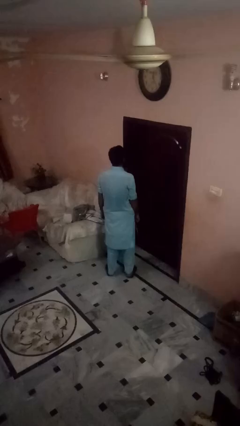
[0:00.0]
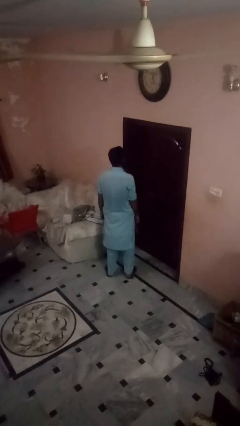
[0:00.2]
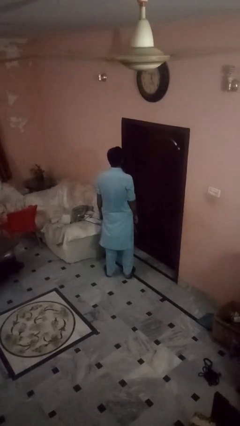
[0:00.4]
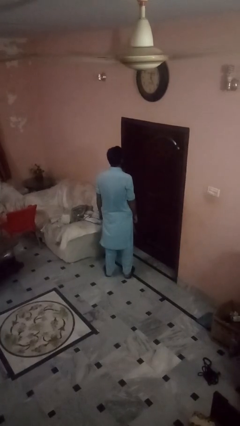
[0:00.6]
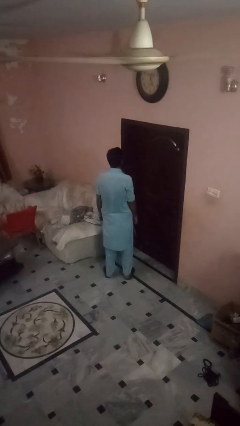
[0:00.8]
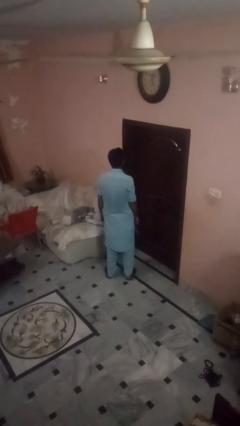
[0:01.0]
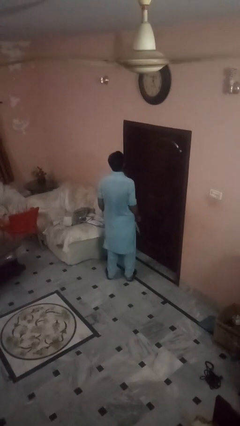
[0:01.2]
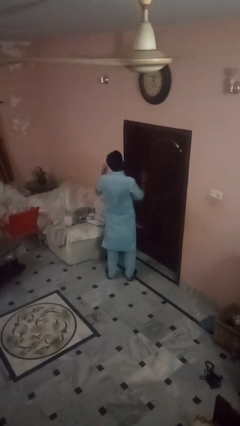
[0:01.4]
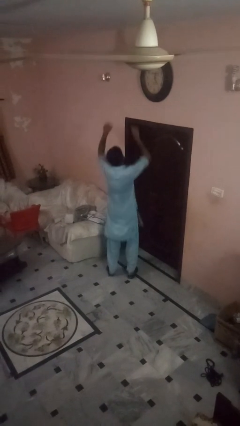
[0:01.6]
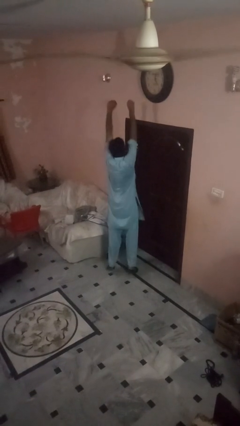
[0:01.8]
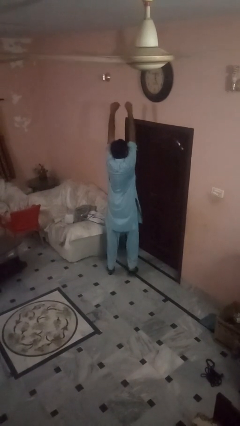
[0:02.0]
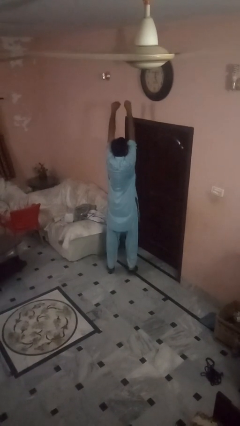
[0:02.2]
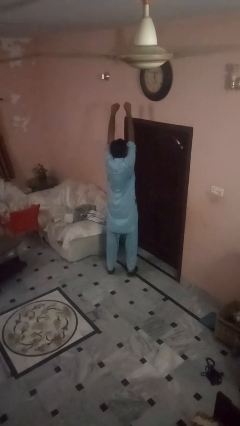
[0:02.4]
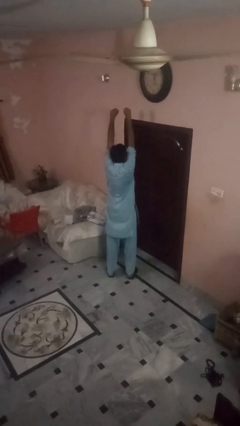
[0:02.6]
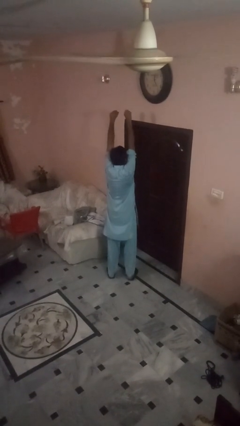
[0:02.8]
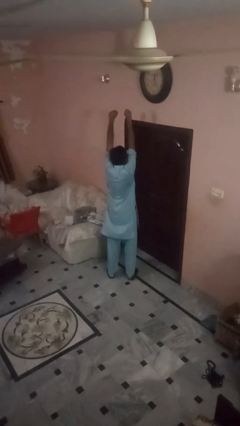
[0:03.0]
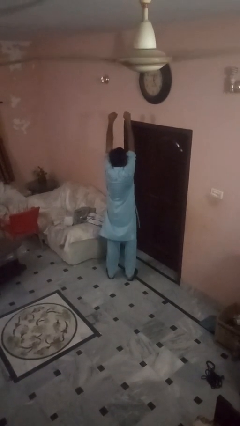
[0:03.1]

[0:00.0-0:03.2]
person handstand

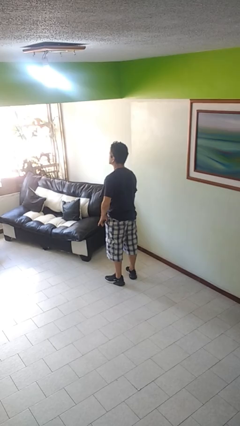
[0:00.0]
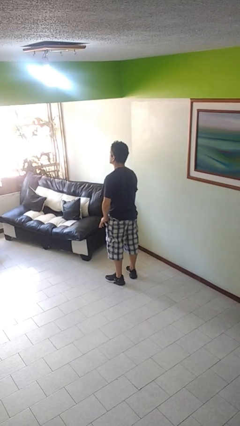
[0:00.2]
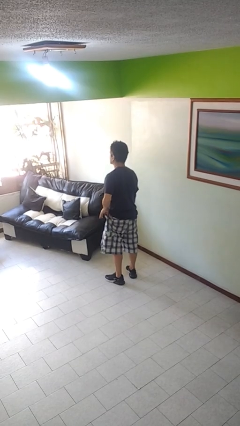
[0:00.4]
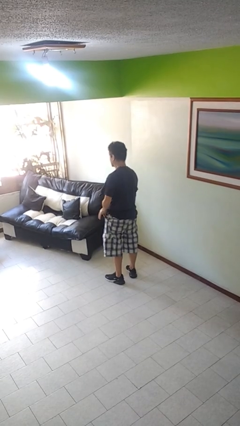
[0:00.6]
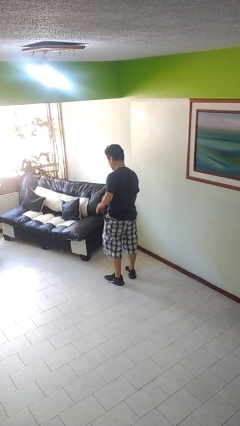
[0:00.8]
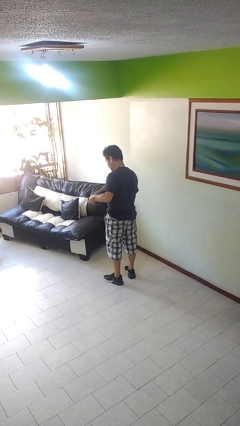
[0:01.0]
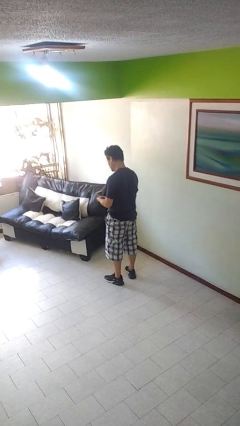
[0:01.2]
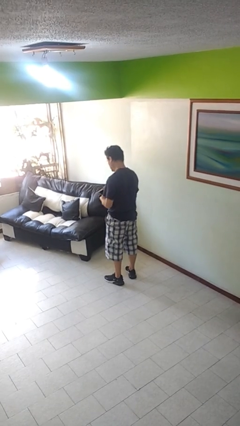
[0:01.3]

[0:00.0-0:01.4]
person takes phone from pocket

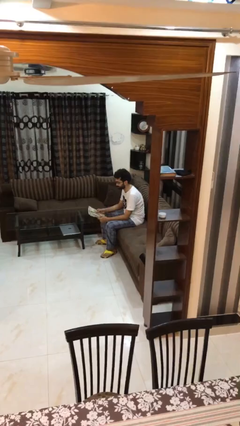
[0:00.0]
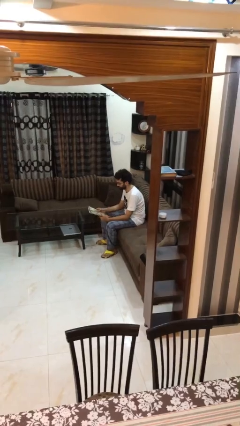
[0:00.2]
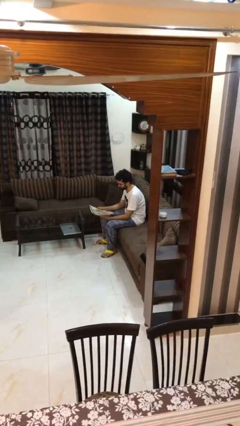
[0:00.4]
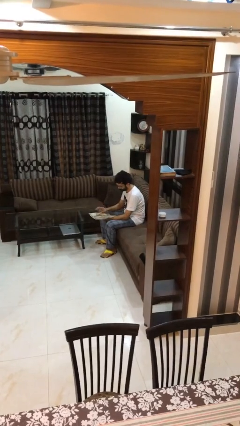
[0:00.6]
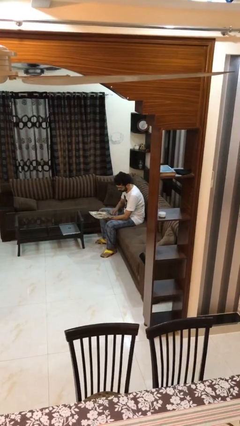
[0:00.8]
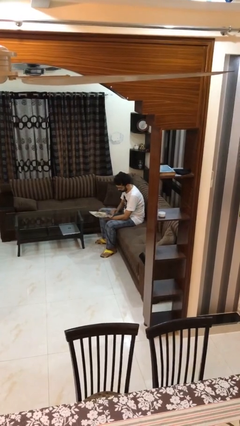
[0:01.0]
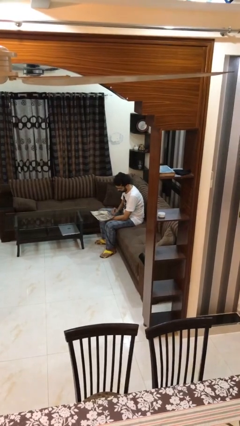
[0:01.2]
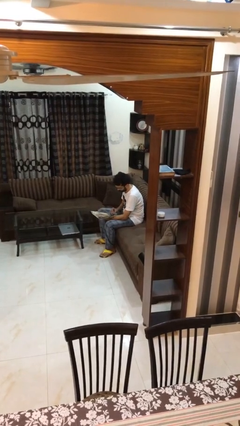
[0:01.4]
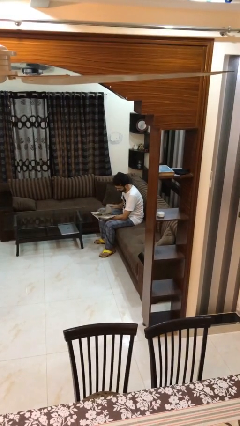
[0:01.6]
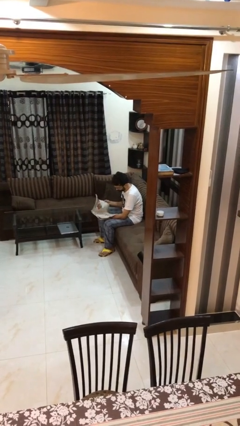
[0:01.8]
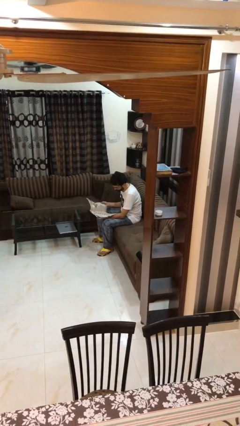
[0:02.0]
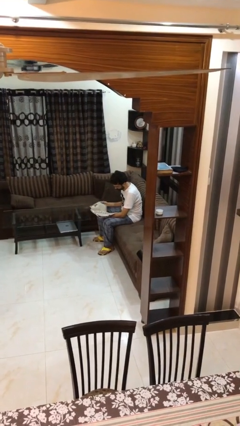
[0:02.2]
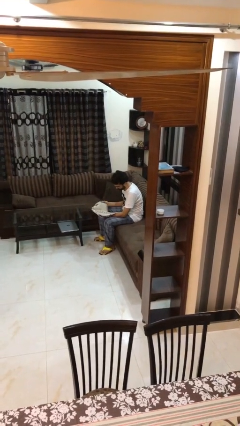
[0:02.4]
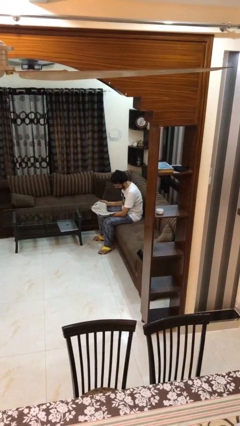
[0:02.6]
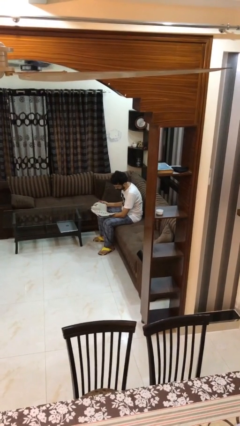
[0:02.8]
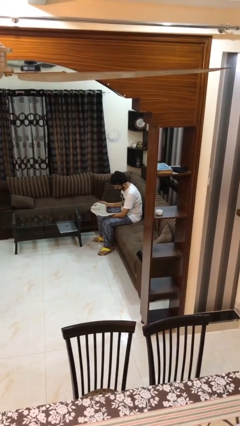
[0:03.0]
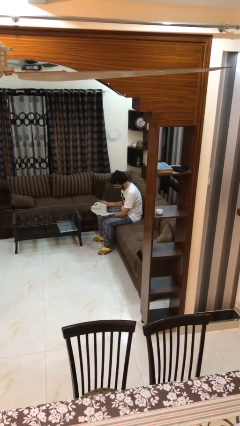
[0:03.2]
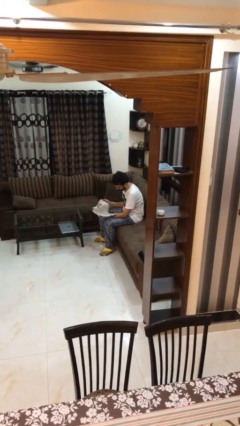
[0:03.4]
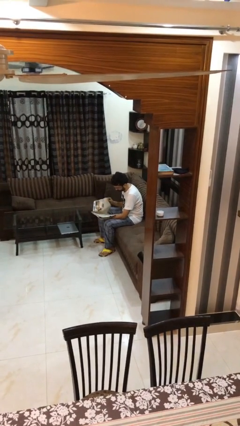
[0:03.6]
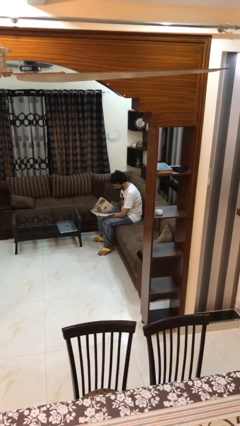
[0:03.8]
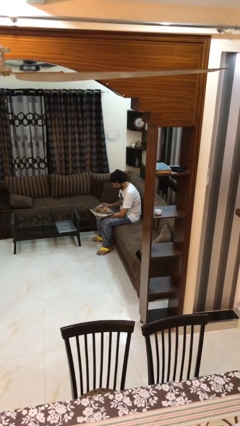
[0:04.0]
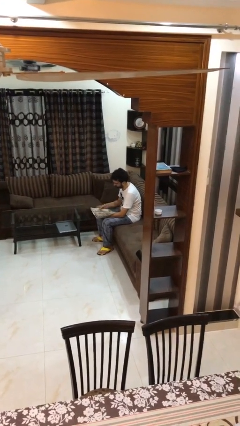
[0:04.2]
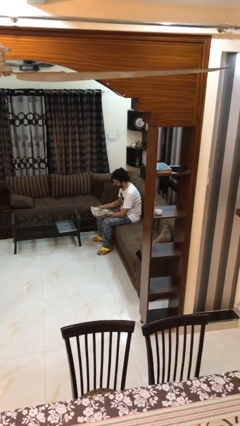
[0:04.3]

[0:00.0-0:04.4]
person reads document

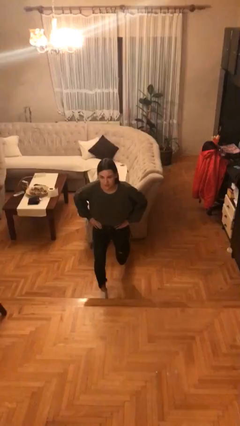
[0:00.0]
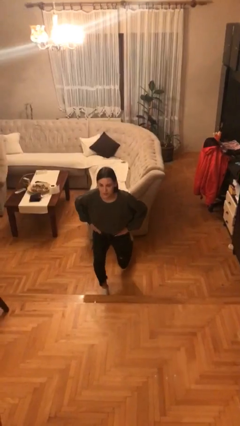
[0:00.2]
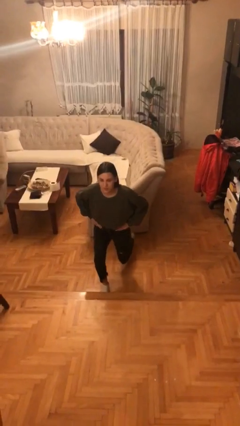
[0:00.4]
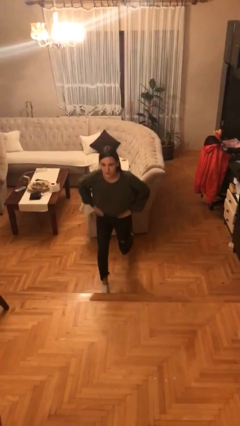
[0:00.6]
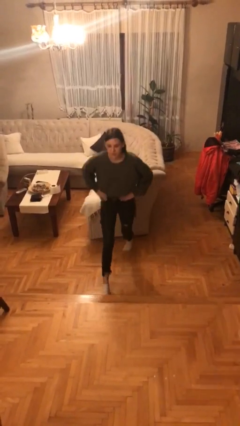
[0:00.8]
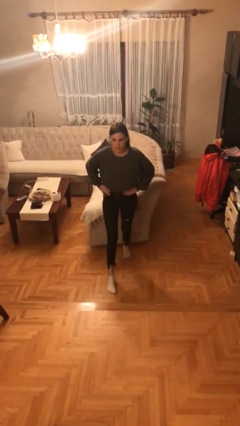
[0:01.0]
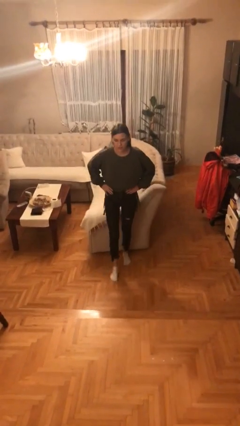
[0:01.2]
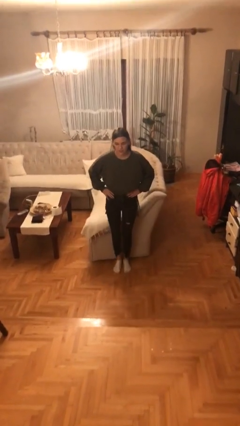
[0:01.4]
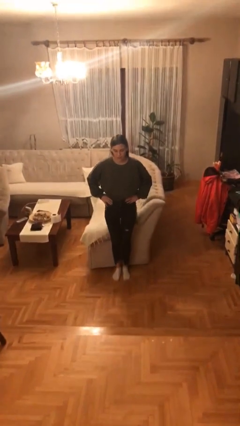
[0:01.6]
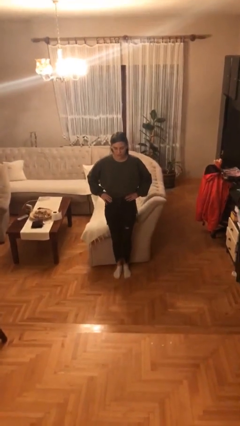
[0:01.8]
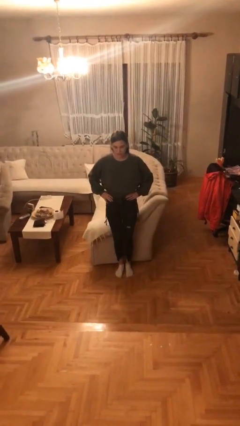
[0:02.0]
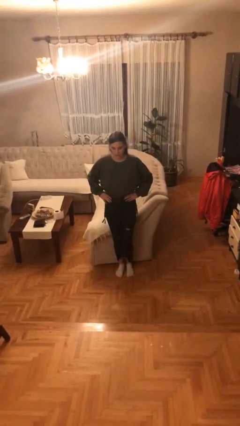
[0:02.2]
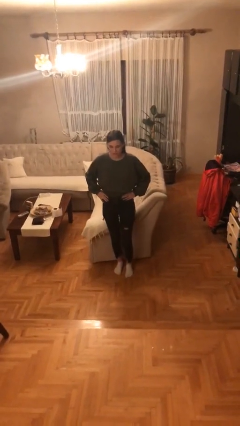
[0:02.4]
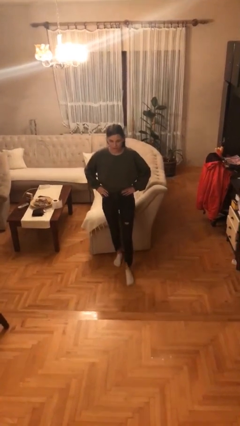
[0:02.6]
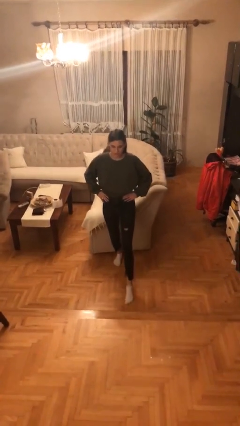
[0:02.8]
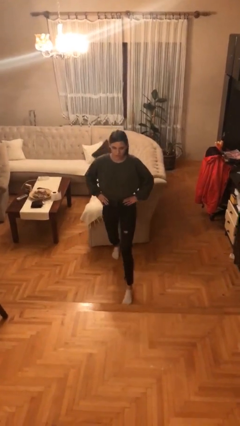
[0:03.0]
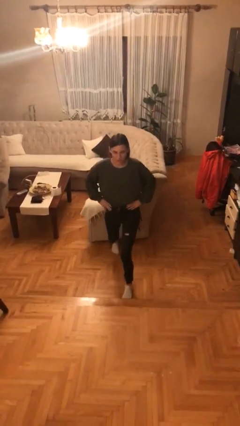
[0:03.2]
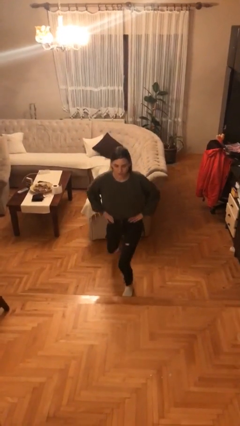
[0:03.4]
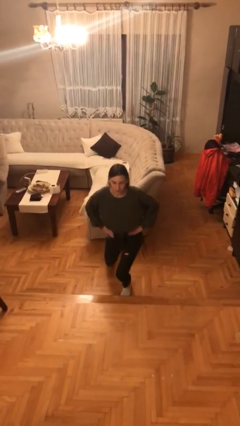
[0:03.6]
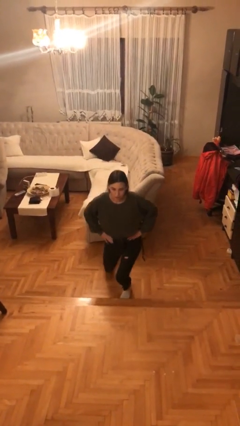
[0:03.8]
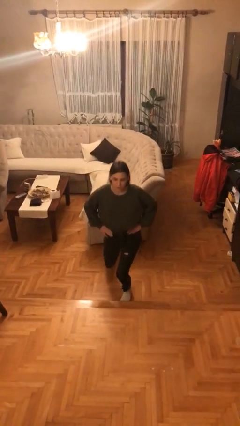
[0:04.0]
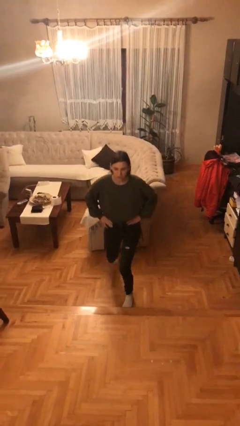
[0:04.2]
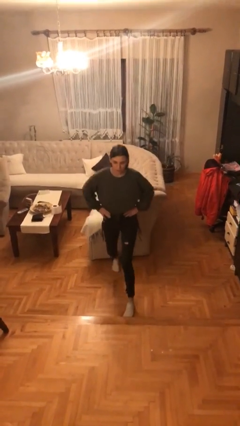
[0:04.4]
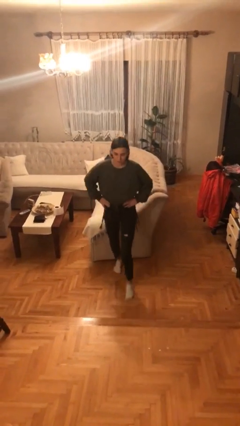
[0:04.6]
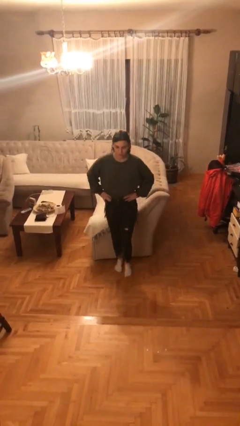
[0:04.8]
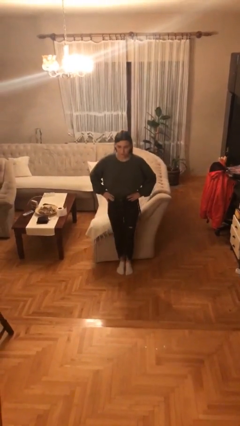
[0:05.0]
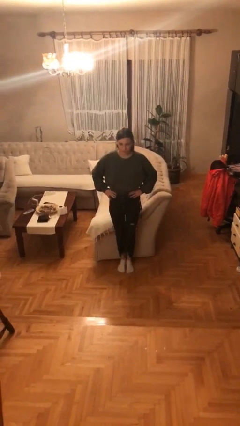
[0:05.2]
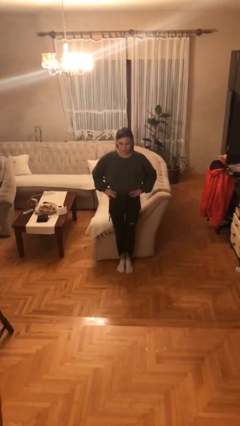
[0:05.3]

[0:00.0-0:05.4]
person exercises with lunges

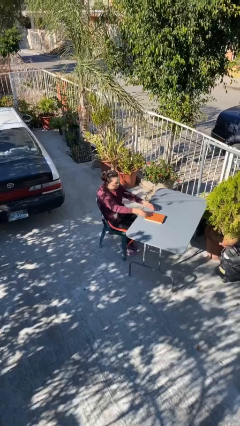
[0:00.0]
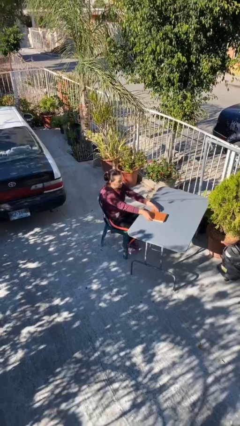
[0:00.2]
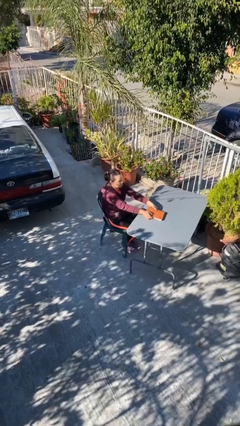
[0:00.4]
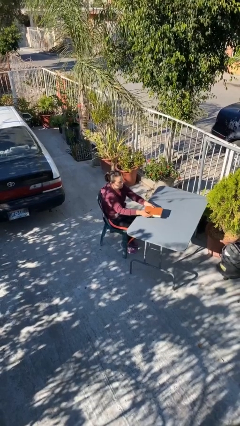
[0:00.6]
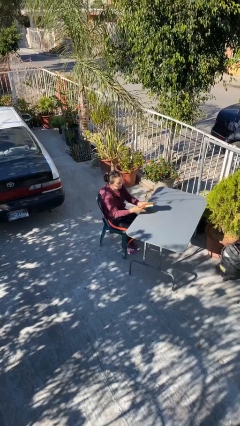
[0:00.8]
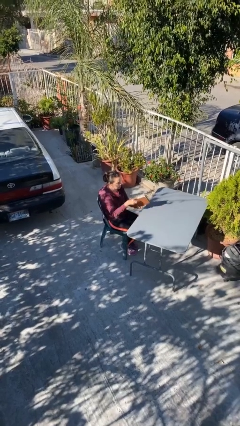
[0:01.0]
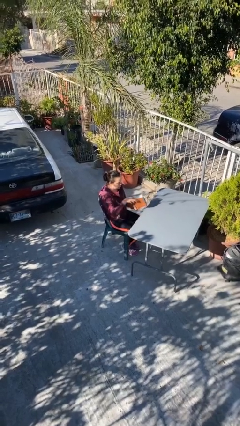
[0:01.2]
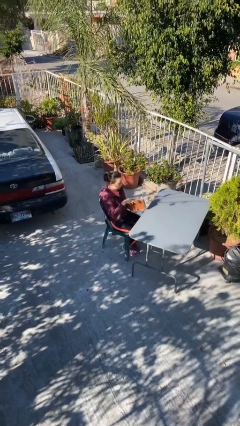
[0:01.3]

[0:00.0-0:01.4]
person picks up object from table

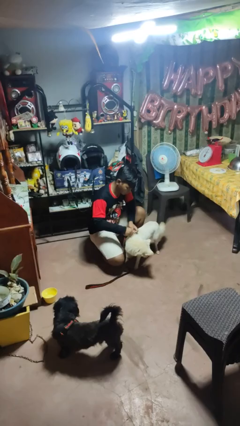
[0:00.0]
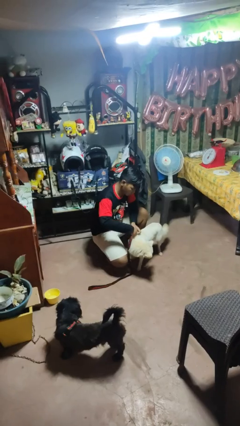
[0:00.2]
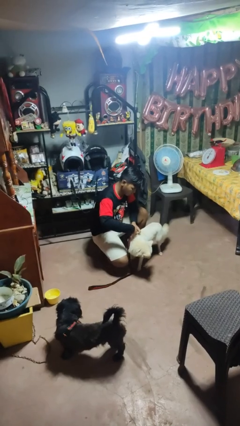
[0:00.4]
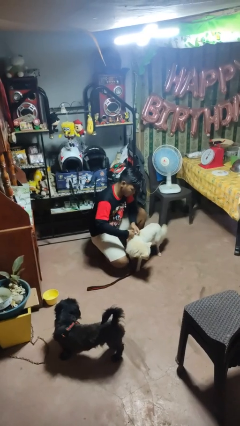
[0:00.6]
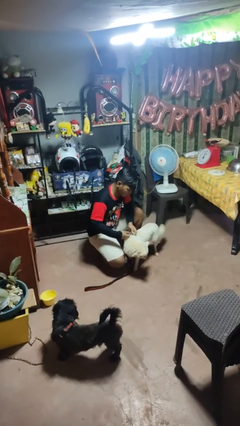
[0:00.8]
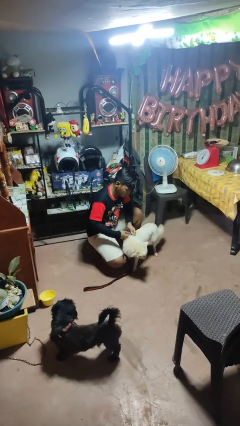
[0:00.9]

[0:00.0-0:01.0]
person attaches leash to dog

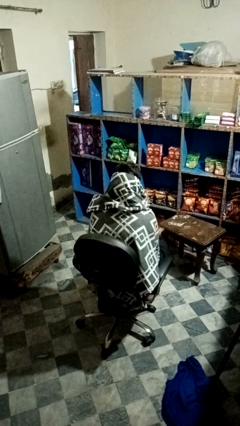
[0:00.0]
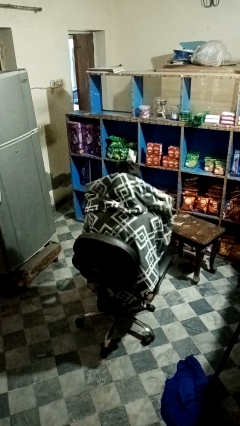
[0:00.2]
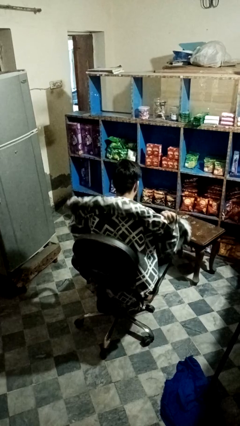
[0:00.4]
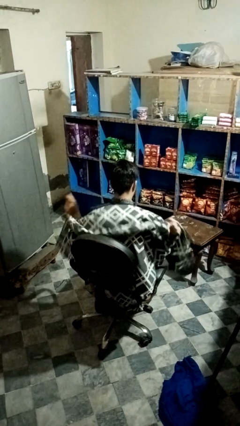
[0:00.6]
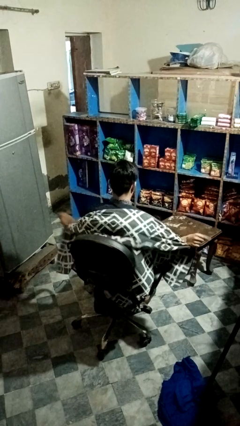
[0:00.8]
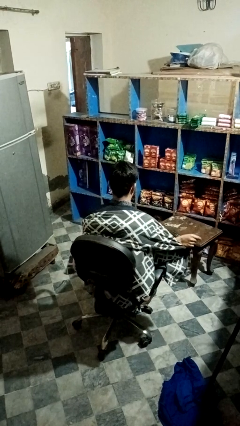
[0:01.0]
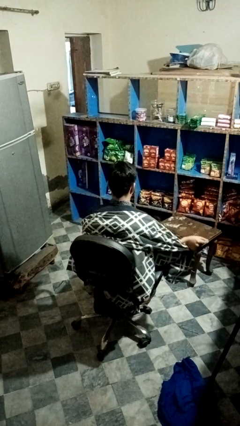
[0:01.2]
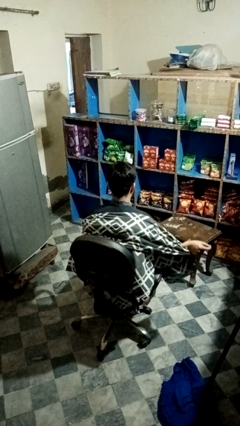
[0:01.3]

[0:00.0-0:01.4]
person uncovers with blanket
